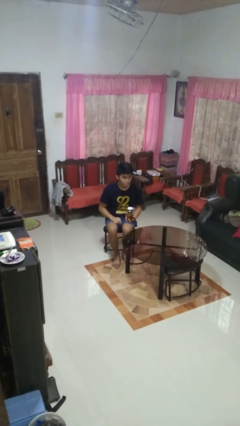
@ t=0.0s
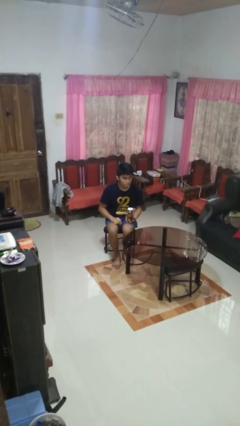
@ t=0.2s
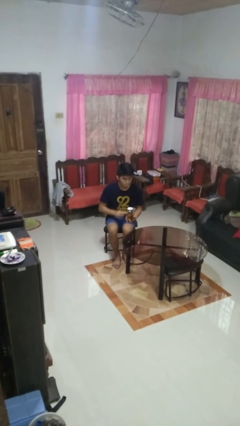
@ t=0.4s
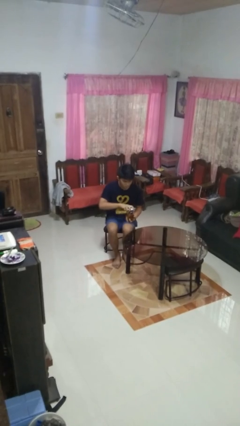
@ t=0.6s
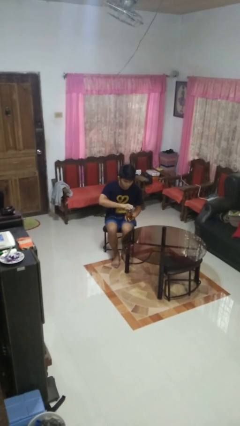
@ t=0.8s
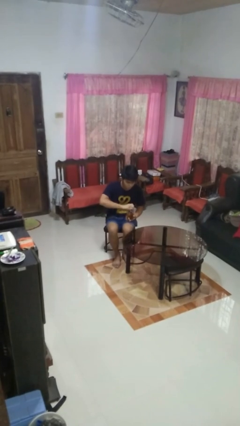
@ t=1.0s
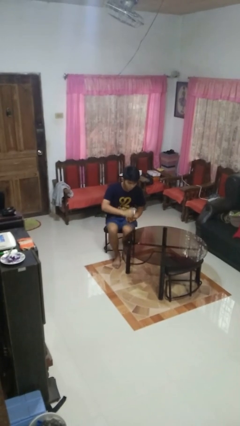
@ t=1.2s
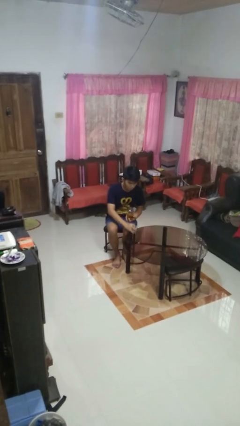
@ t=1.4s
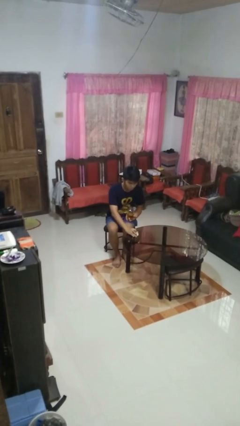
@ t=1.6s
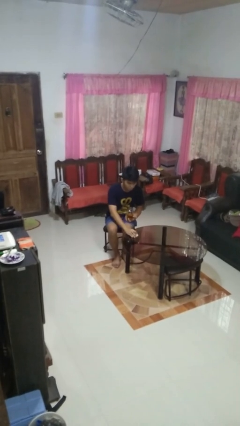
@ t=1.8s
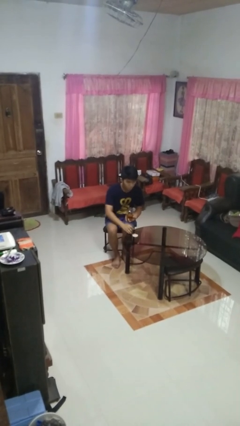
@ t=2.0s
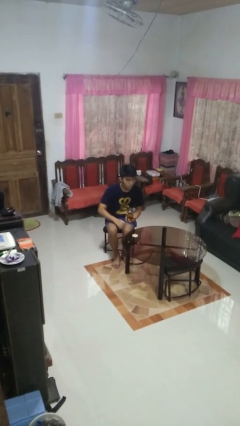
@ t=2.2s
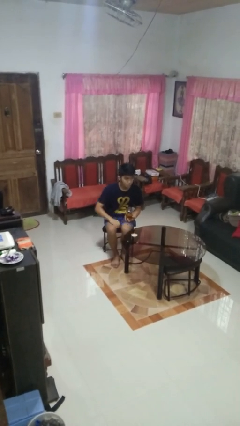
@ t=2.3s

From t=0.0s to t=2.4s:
person opens jar

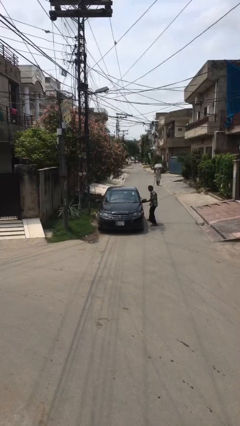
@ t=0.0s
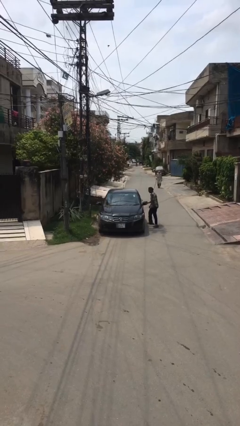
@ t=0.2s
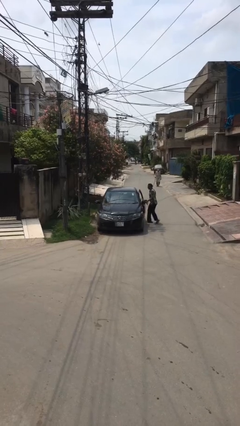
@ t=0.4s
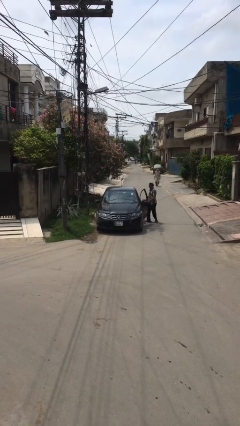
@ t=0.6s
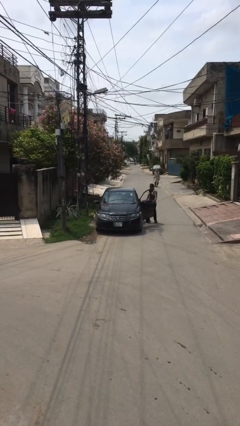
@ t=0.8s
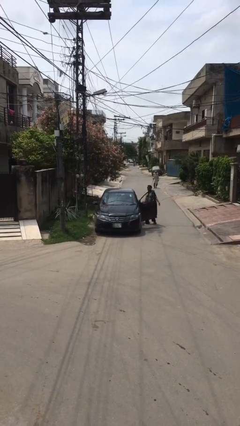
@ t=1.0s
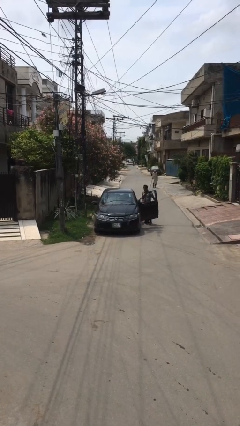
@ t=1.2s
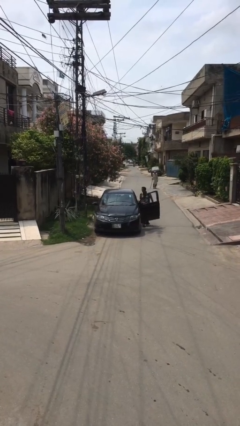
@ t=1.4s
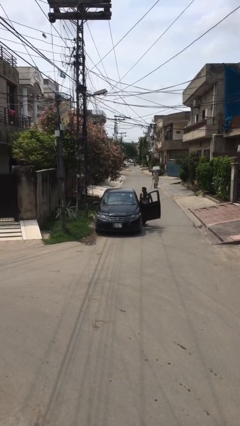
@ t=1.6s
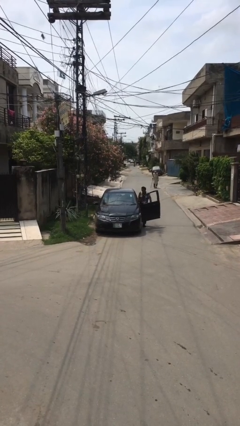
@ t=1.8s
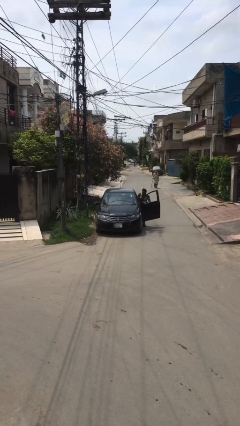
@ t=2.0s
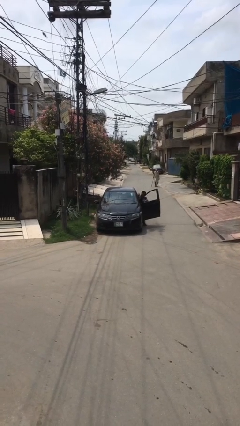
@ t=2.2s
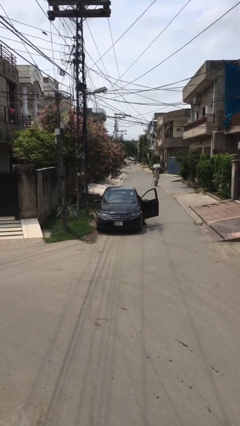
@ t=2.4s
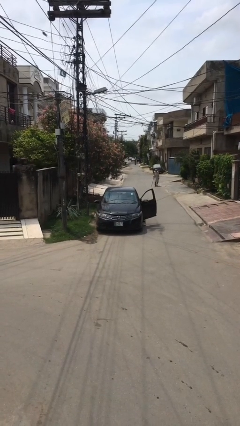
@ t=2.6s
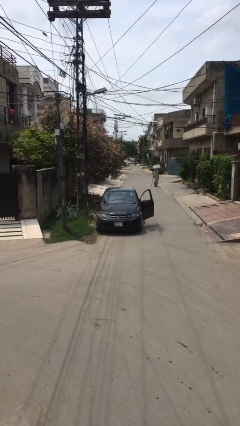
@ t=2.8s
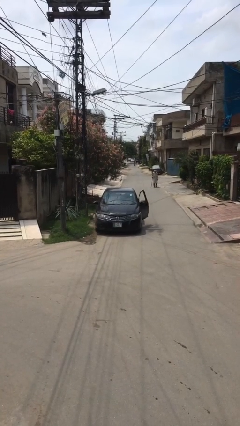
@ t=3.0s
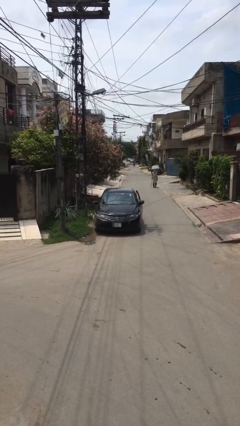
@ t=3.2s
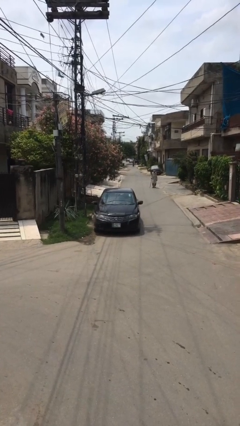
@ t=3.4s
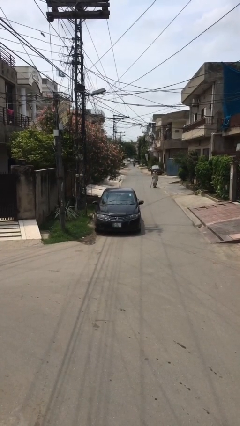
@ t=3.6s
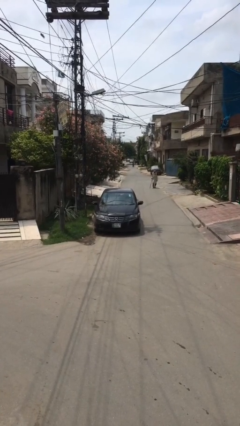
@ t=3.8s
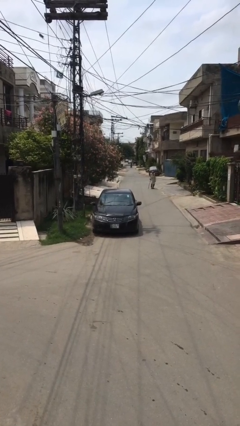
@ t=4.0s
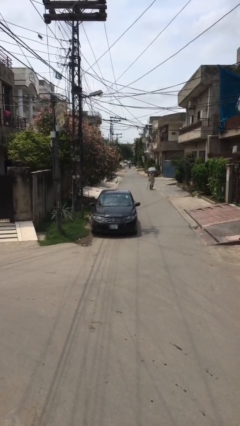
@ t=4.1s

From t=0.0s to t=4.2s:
car picks up person

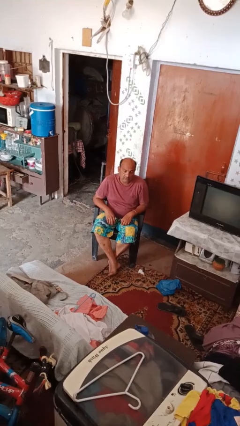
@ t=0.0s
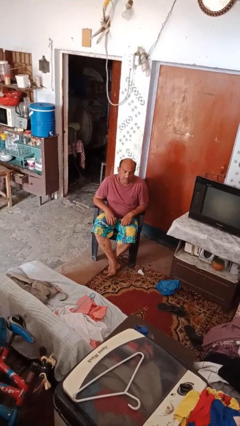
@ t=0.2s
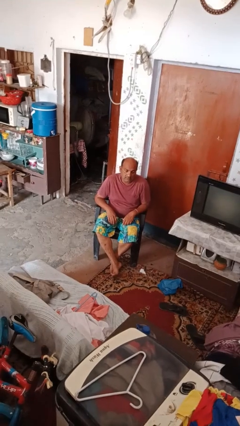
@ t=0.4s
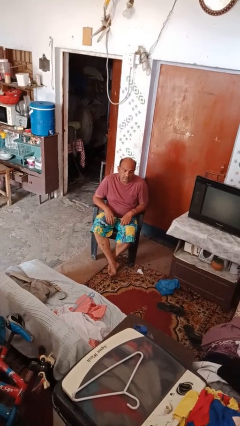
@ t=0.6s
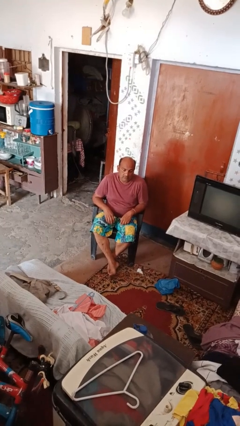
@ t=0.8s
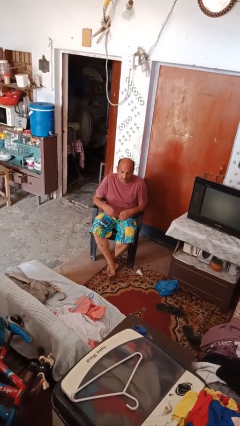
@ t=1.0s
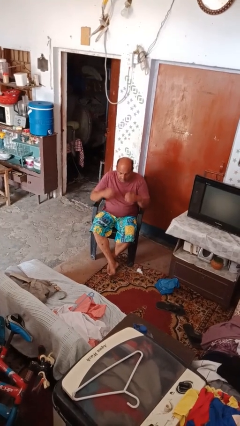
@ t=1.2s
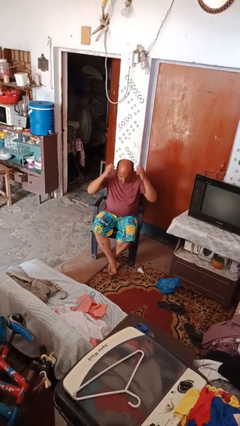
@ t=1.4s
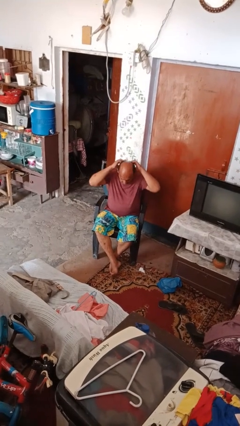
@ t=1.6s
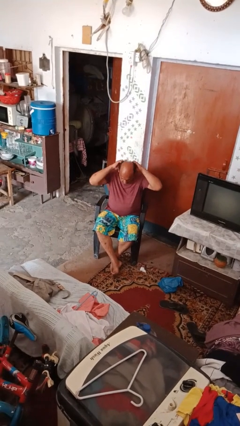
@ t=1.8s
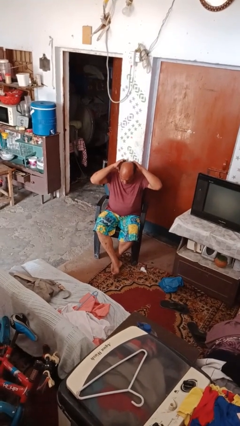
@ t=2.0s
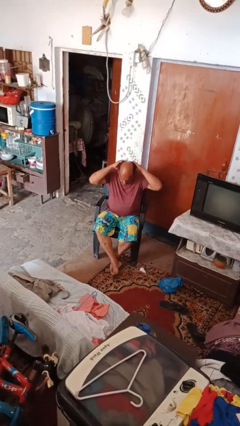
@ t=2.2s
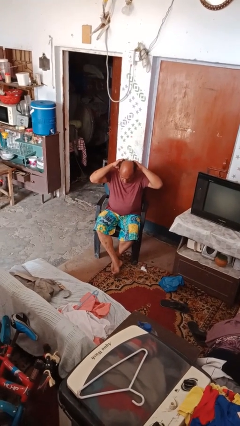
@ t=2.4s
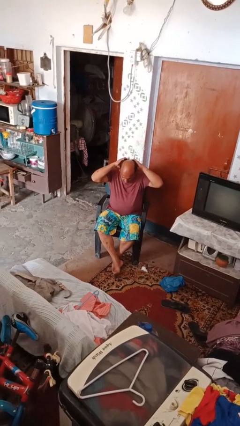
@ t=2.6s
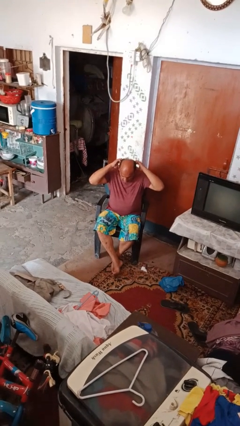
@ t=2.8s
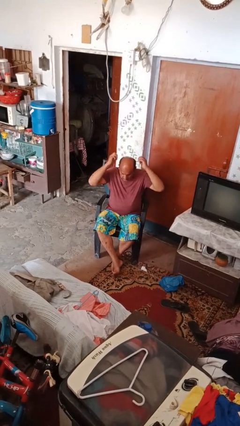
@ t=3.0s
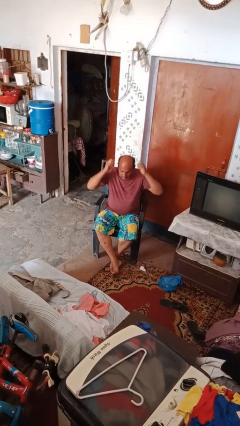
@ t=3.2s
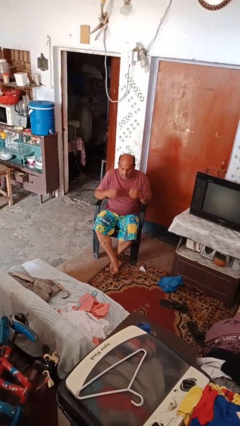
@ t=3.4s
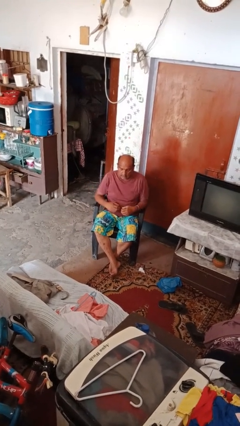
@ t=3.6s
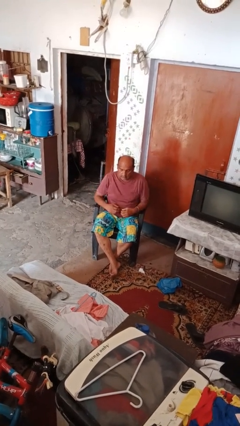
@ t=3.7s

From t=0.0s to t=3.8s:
person scratches face

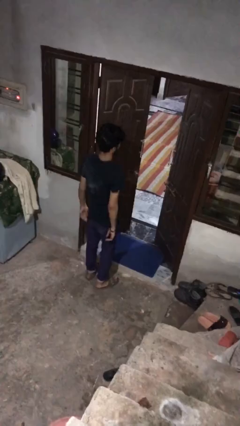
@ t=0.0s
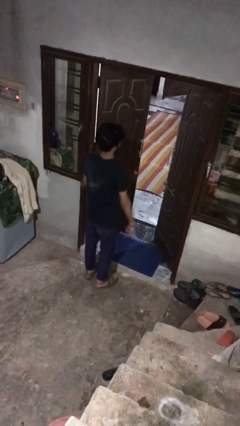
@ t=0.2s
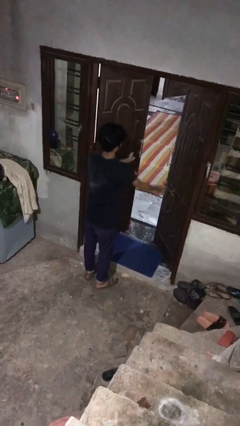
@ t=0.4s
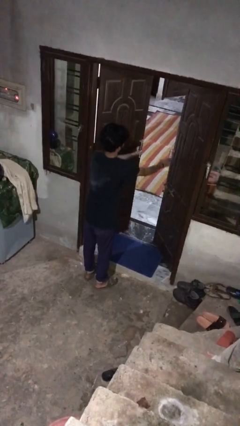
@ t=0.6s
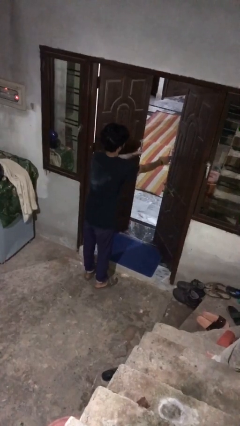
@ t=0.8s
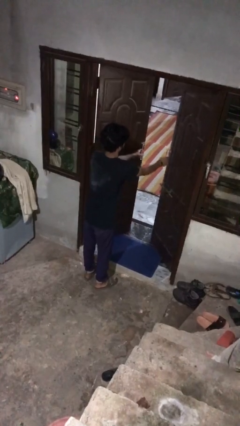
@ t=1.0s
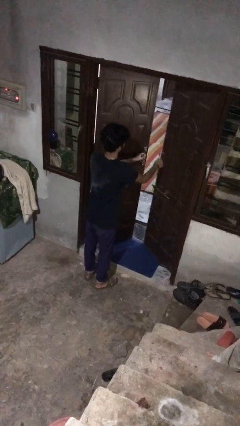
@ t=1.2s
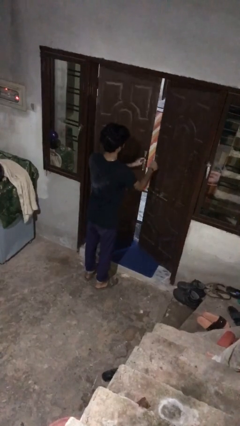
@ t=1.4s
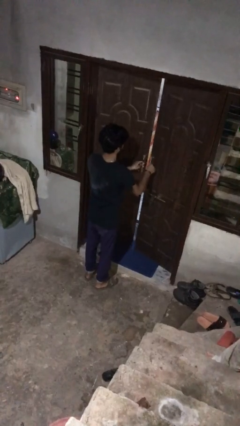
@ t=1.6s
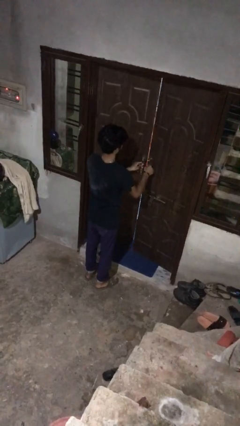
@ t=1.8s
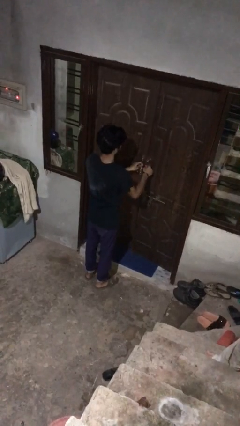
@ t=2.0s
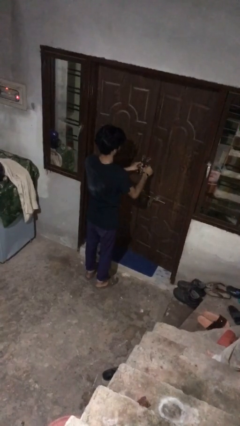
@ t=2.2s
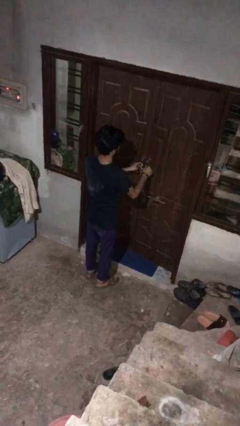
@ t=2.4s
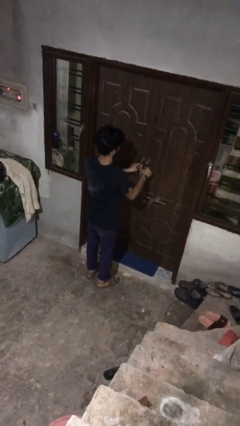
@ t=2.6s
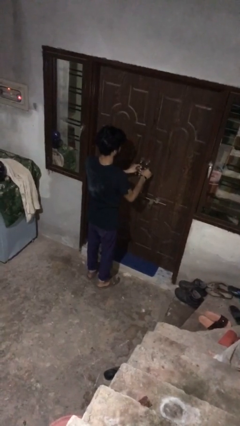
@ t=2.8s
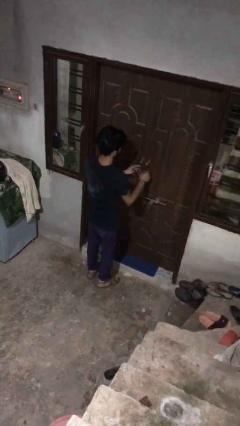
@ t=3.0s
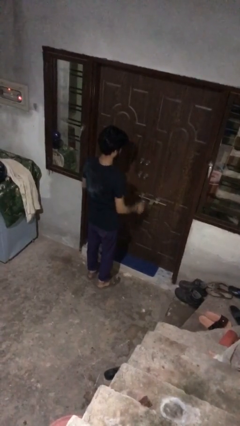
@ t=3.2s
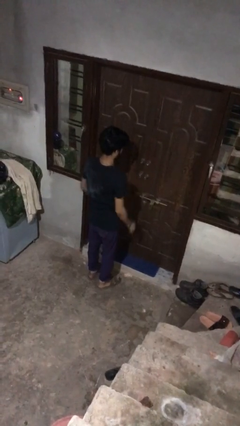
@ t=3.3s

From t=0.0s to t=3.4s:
person closes facility door

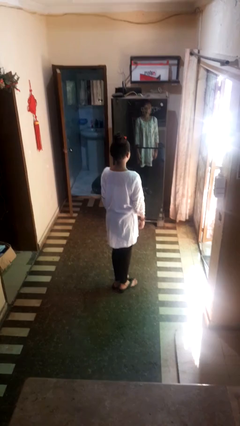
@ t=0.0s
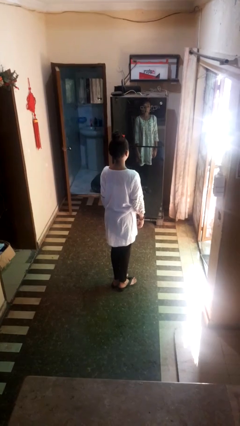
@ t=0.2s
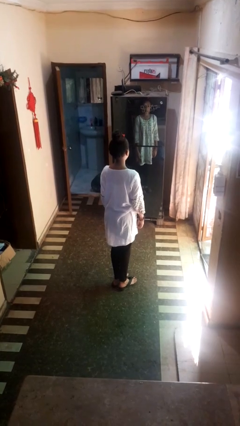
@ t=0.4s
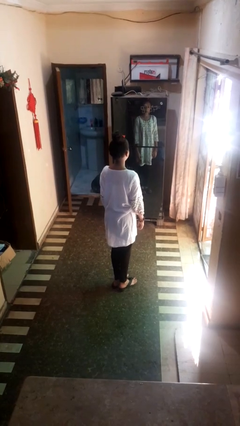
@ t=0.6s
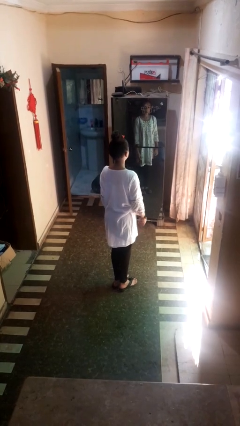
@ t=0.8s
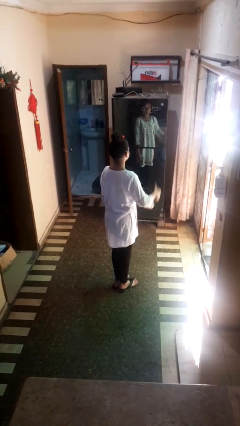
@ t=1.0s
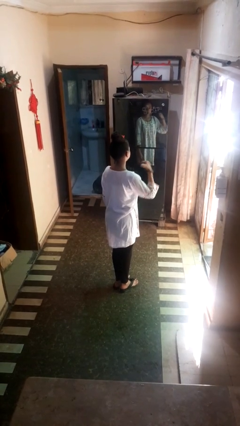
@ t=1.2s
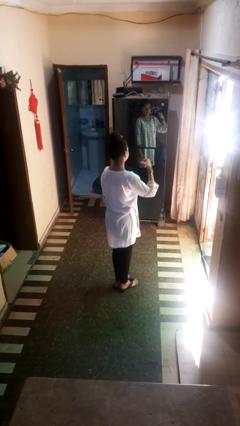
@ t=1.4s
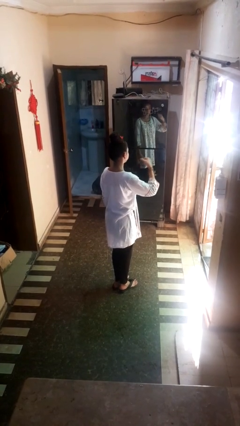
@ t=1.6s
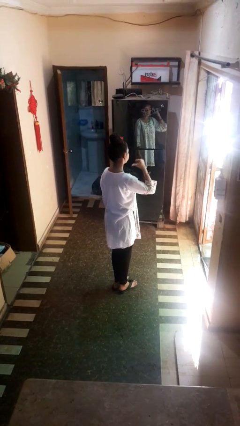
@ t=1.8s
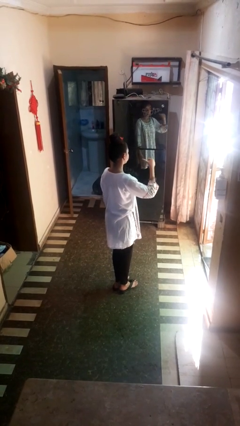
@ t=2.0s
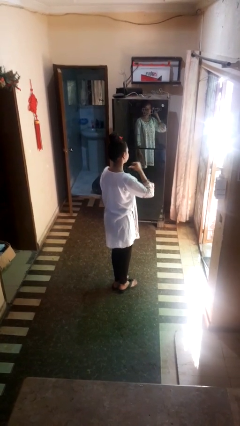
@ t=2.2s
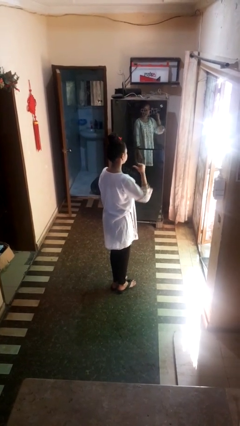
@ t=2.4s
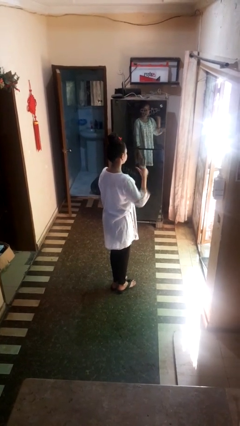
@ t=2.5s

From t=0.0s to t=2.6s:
person gestures behind me
